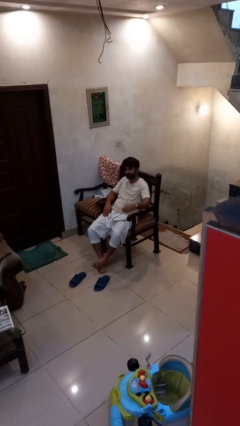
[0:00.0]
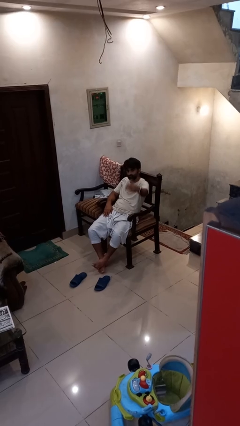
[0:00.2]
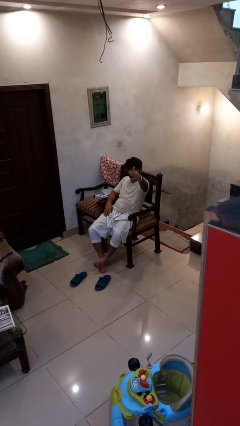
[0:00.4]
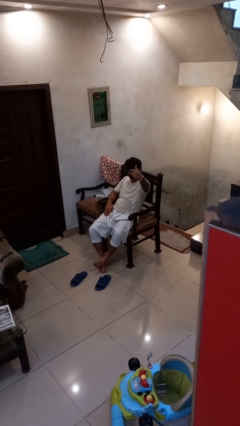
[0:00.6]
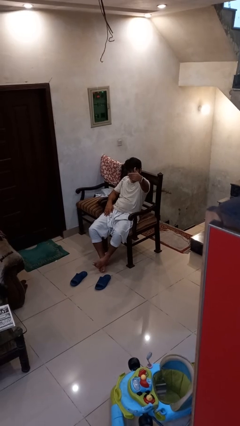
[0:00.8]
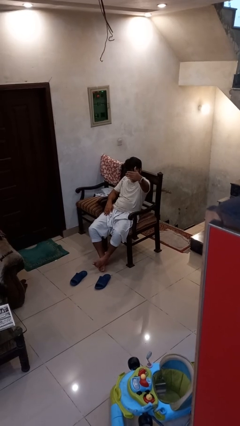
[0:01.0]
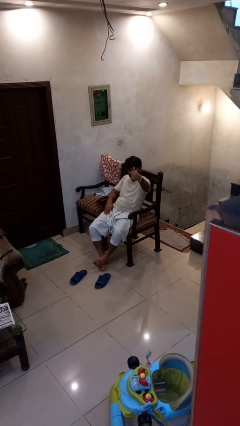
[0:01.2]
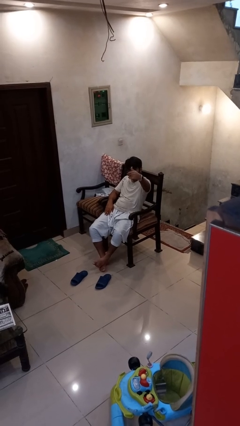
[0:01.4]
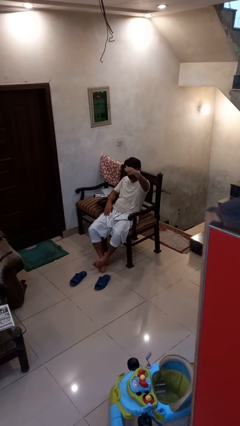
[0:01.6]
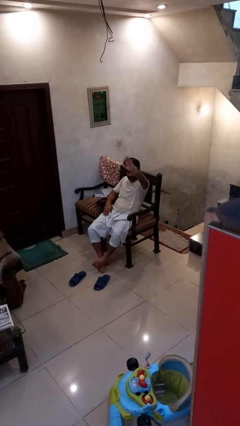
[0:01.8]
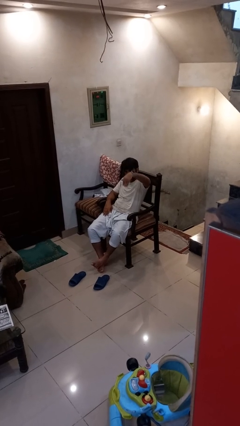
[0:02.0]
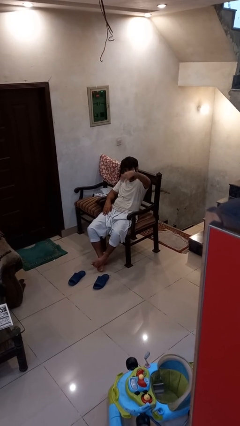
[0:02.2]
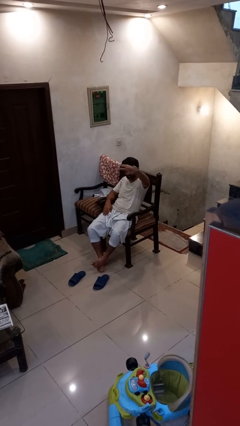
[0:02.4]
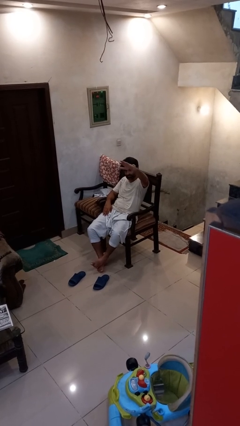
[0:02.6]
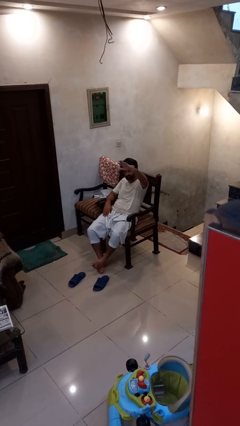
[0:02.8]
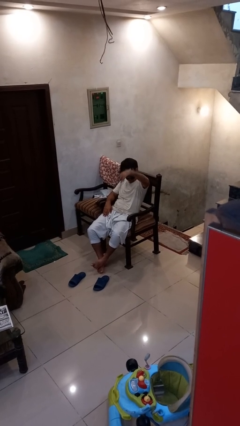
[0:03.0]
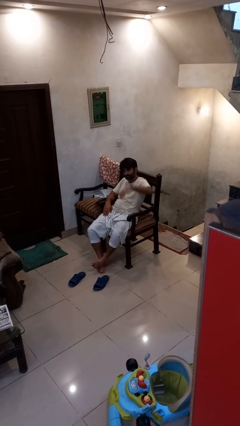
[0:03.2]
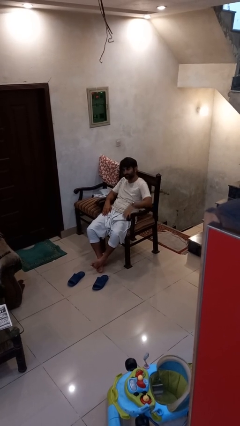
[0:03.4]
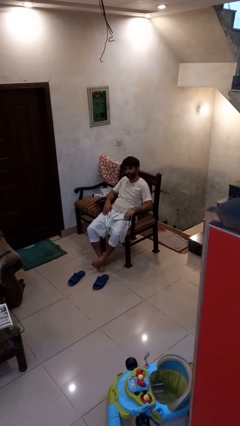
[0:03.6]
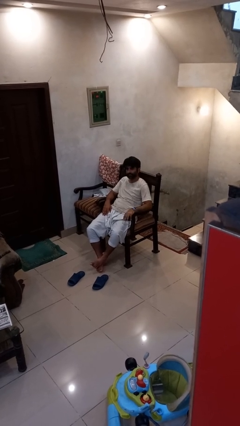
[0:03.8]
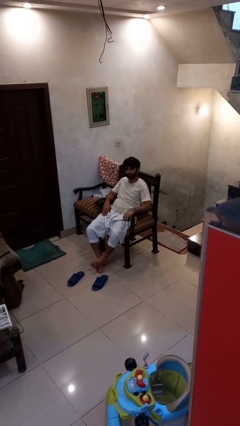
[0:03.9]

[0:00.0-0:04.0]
person gestures come here

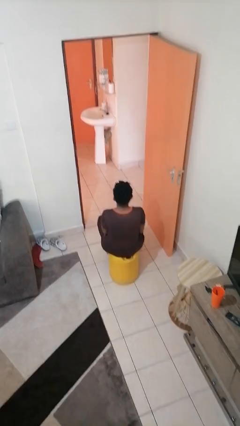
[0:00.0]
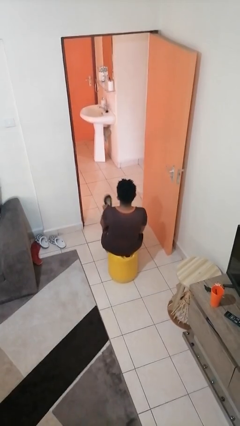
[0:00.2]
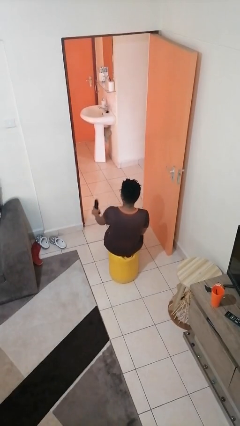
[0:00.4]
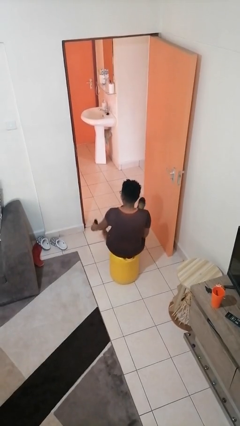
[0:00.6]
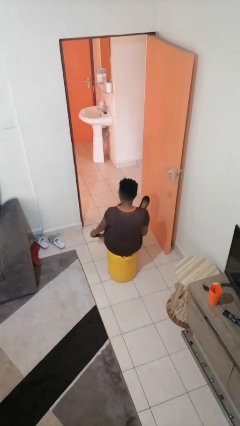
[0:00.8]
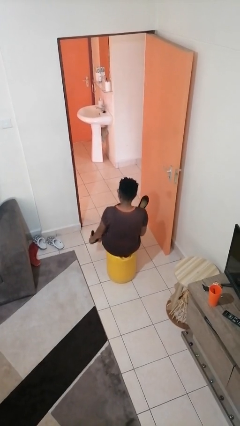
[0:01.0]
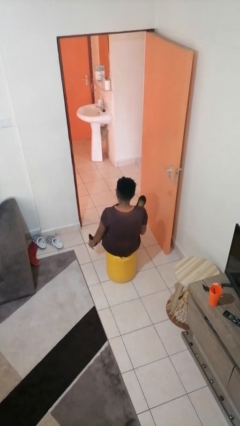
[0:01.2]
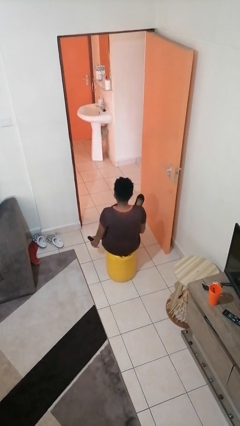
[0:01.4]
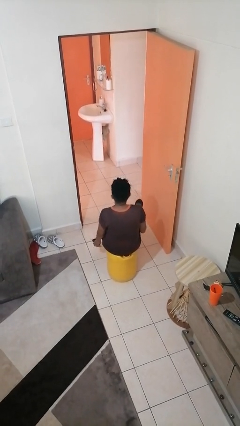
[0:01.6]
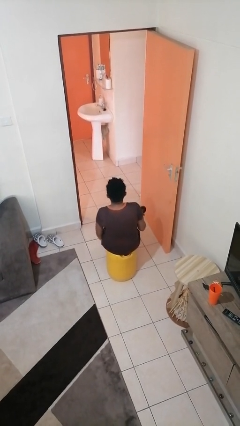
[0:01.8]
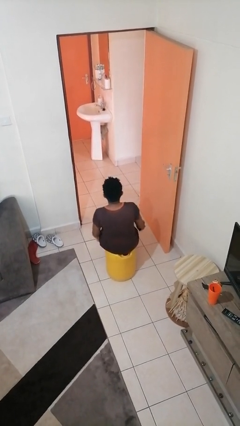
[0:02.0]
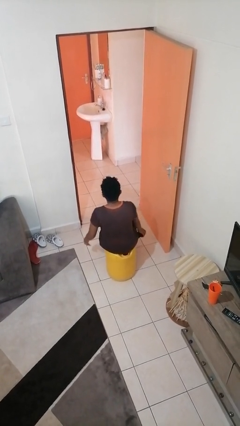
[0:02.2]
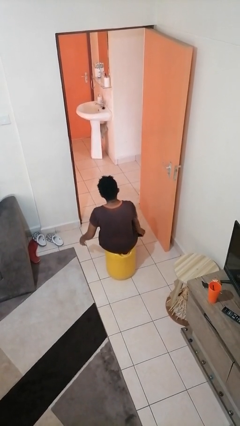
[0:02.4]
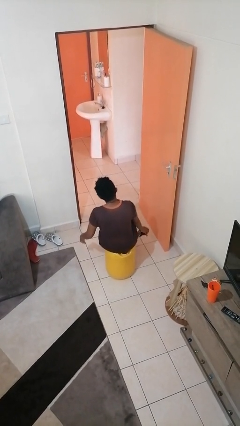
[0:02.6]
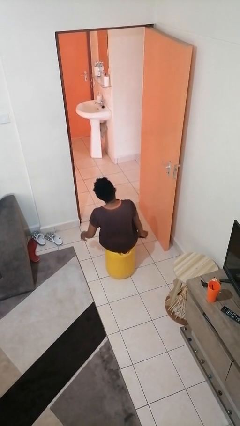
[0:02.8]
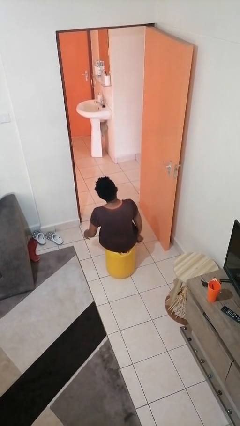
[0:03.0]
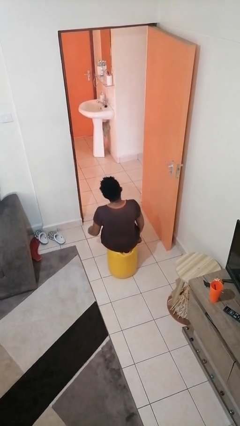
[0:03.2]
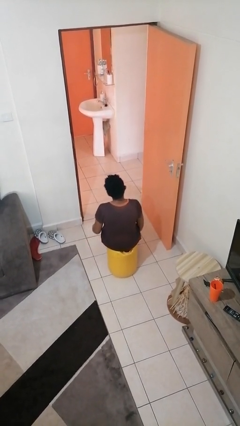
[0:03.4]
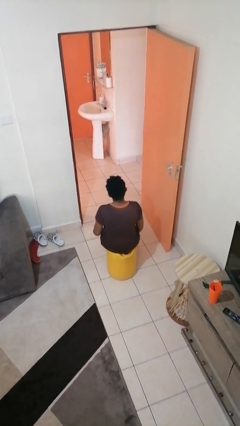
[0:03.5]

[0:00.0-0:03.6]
person puts on shoes

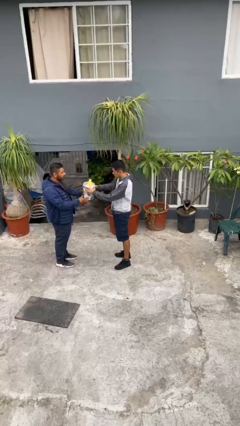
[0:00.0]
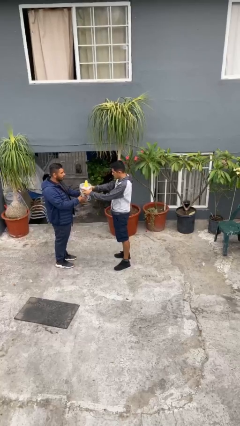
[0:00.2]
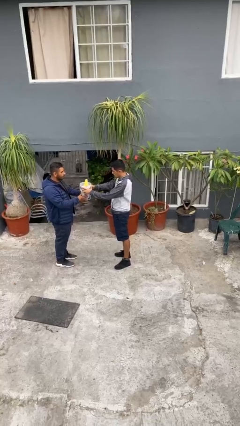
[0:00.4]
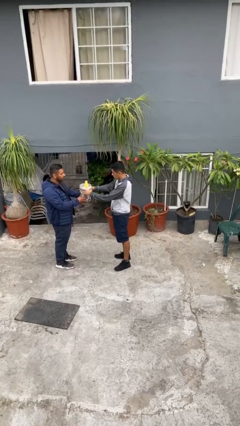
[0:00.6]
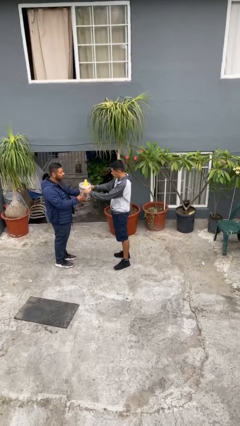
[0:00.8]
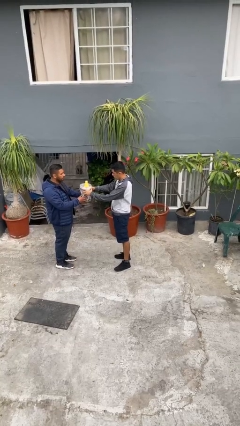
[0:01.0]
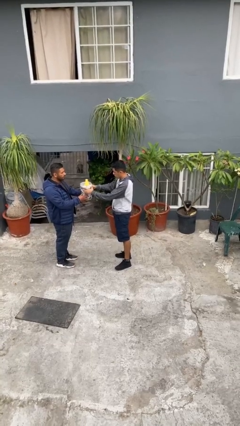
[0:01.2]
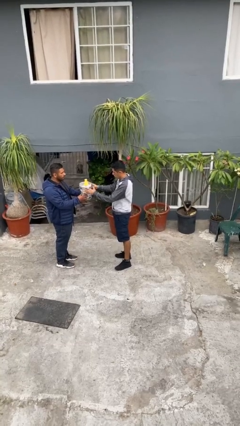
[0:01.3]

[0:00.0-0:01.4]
person transfers object to person

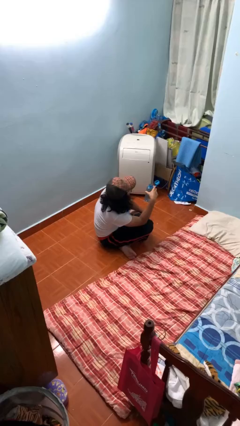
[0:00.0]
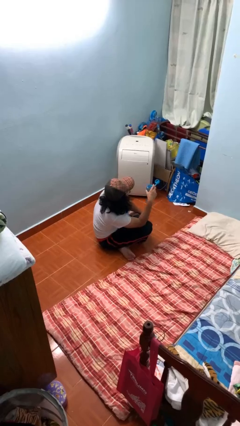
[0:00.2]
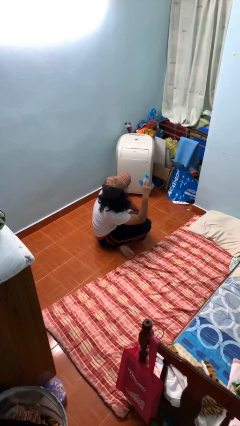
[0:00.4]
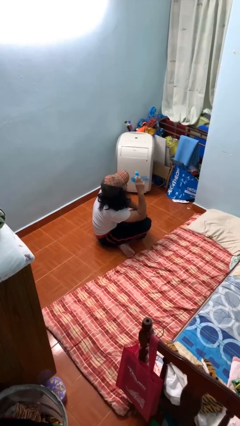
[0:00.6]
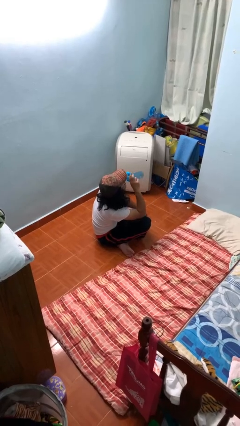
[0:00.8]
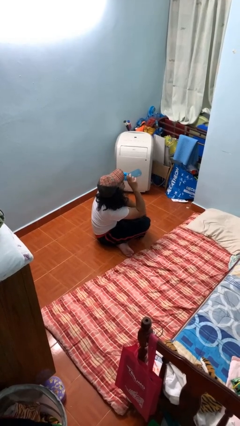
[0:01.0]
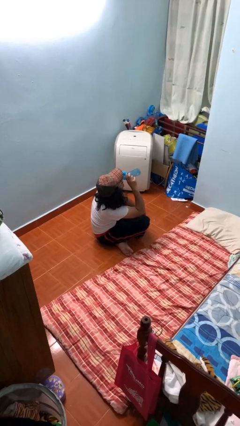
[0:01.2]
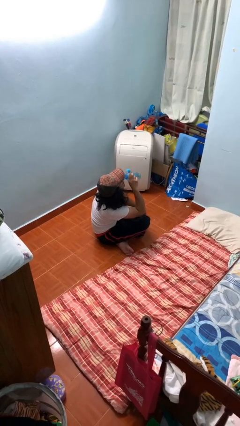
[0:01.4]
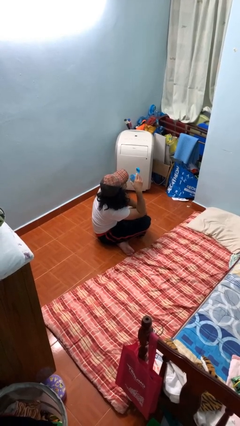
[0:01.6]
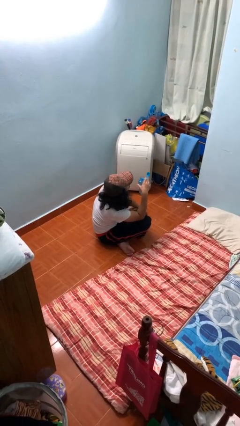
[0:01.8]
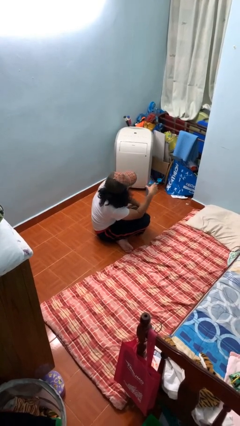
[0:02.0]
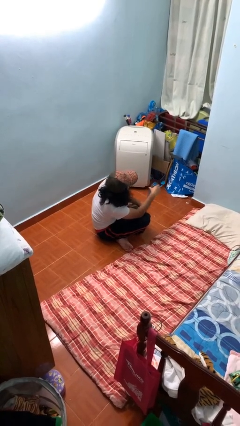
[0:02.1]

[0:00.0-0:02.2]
person drinks from bottle

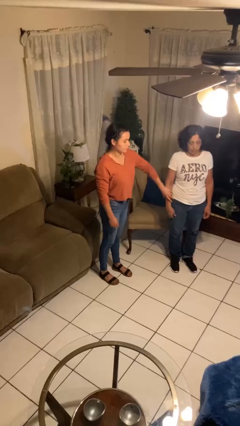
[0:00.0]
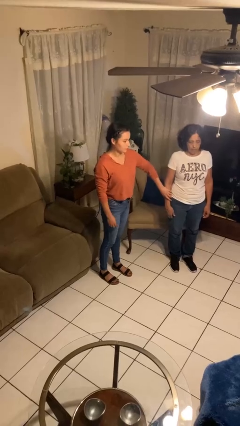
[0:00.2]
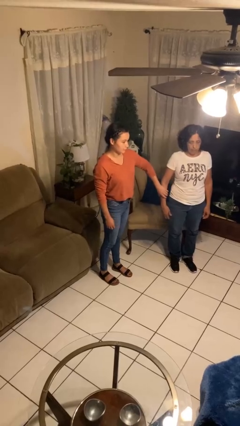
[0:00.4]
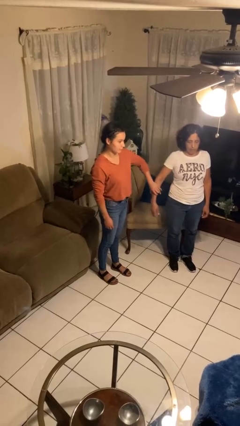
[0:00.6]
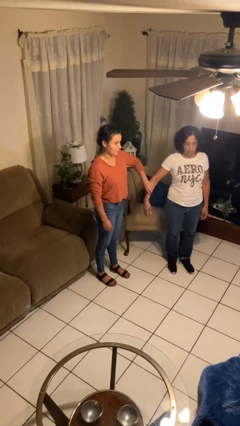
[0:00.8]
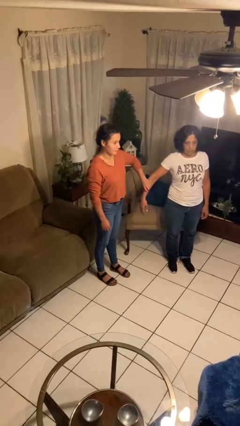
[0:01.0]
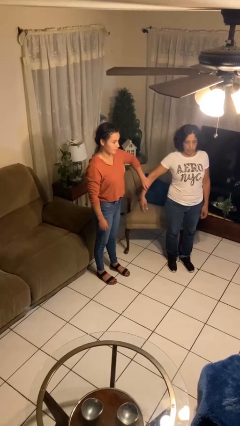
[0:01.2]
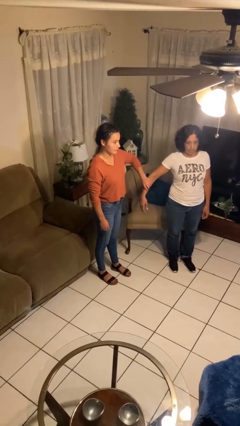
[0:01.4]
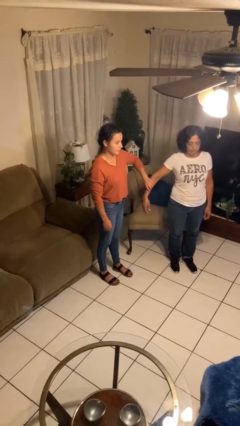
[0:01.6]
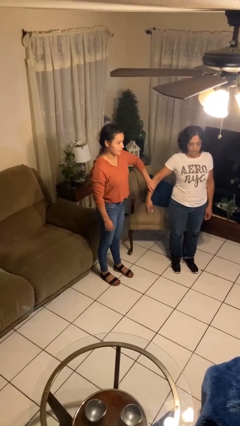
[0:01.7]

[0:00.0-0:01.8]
person grabs person by forearm

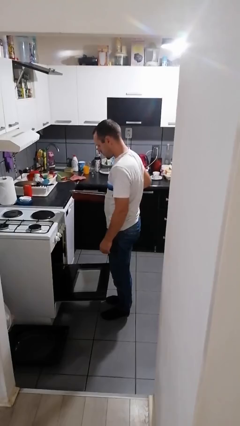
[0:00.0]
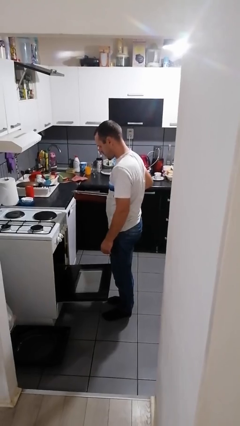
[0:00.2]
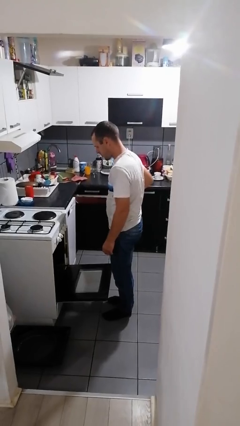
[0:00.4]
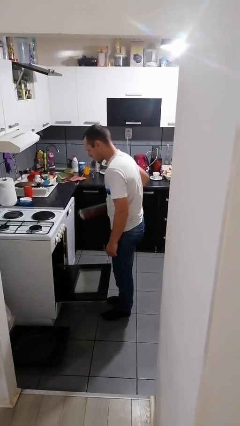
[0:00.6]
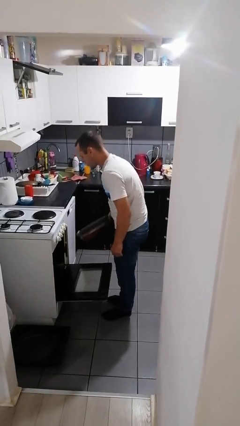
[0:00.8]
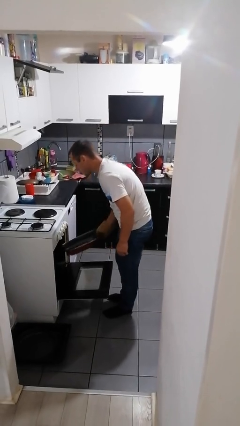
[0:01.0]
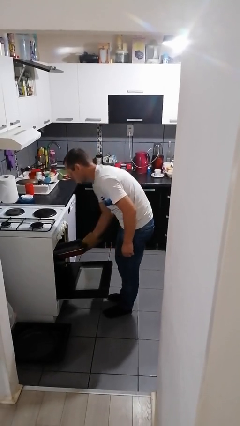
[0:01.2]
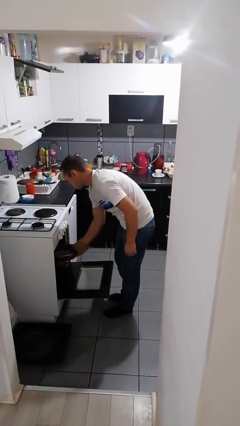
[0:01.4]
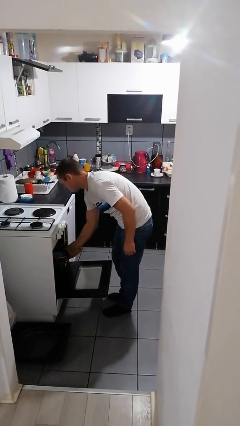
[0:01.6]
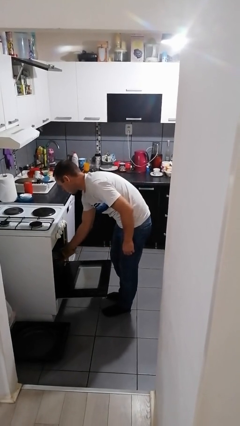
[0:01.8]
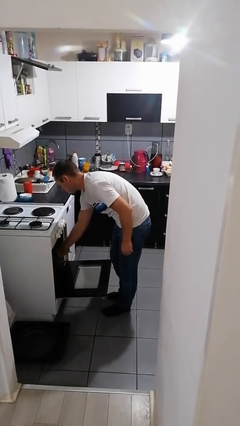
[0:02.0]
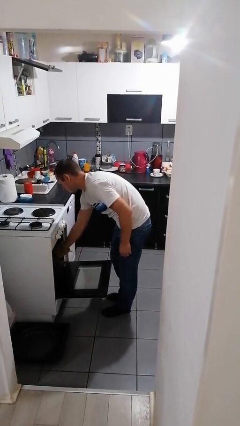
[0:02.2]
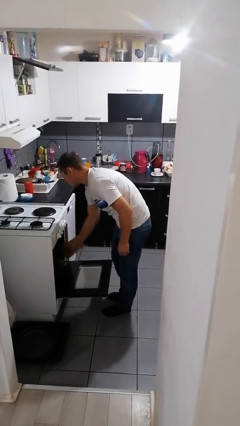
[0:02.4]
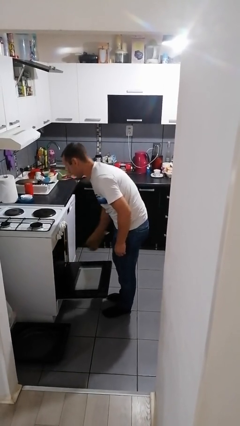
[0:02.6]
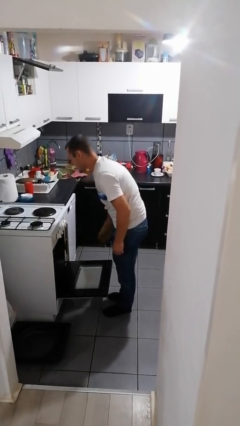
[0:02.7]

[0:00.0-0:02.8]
person puts object into oven

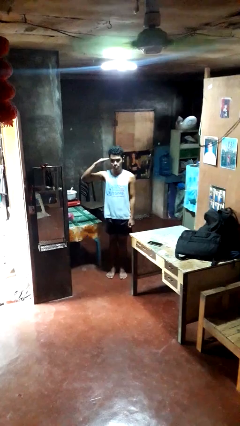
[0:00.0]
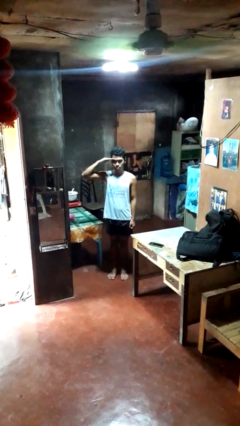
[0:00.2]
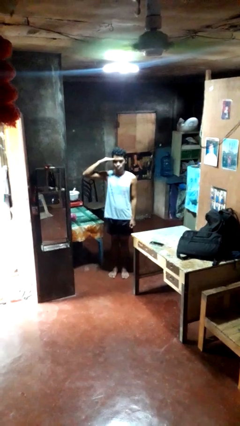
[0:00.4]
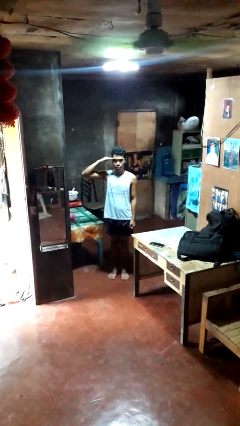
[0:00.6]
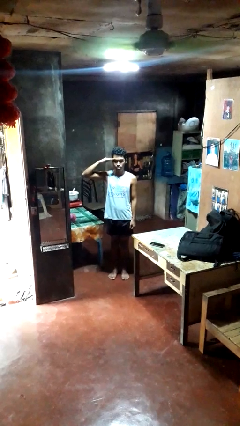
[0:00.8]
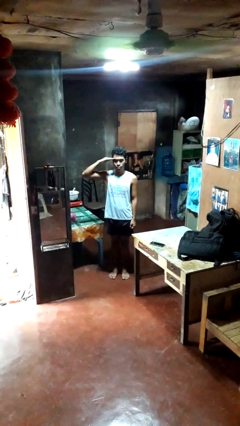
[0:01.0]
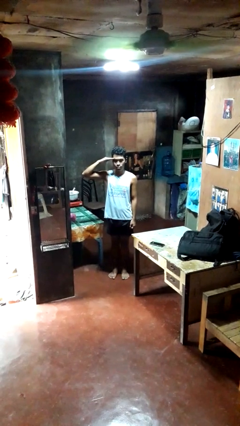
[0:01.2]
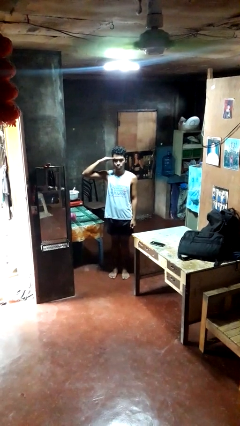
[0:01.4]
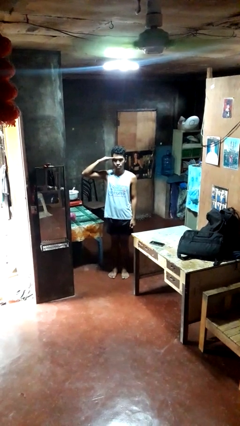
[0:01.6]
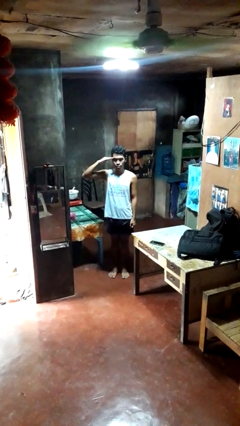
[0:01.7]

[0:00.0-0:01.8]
person salutes
